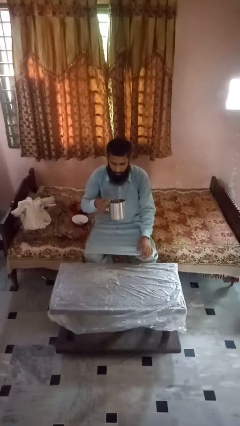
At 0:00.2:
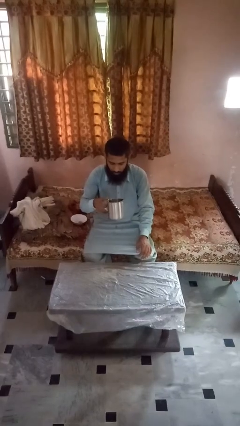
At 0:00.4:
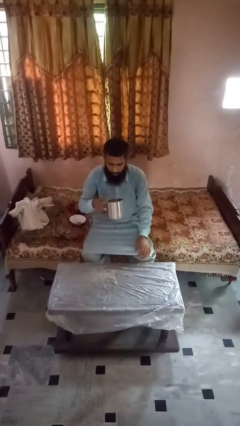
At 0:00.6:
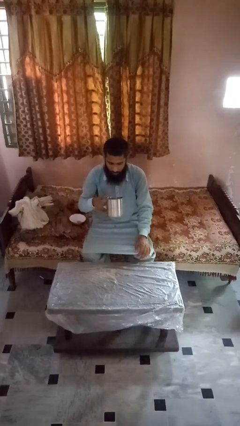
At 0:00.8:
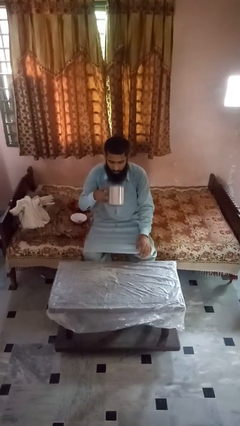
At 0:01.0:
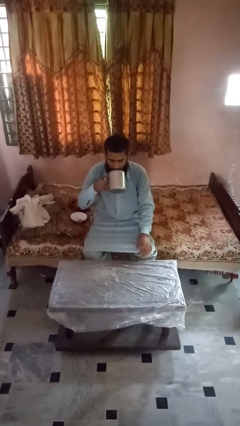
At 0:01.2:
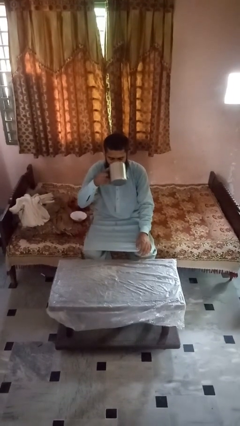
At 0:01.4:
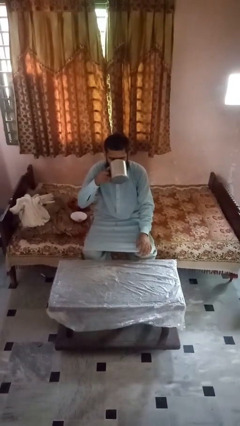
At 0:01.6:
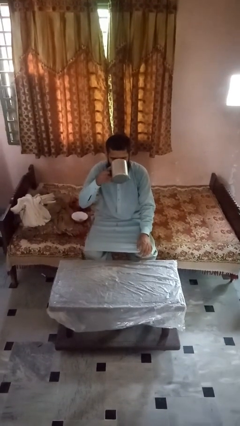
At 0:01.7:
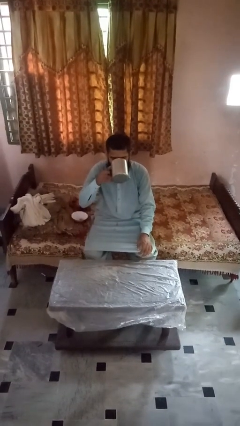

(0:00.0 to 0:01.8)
person drinks from mug

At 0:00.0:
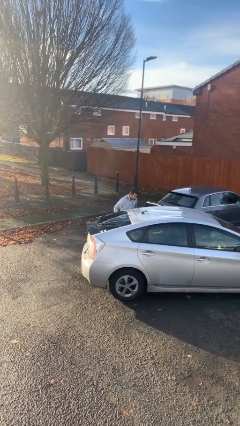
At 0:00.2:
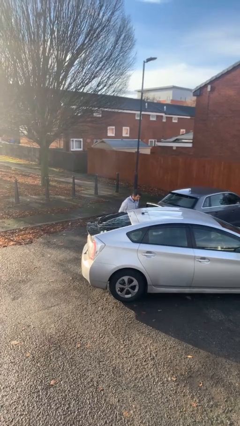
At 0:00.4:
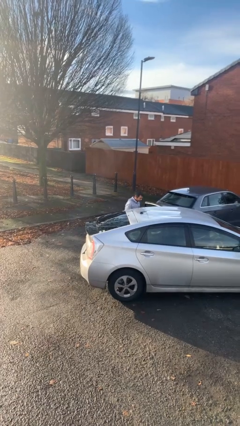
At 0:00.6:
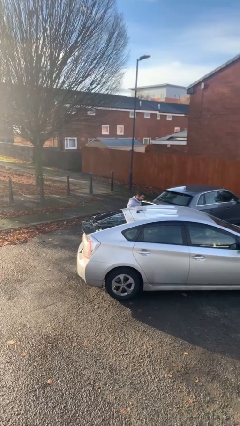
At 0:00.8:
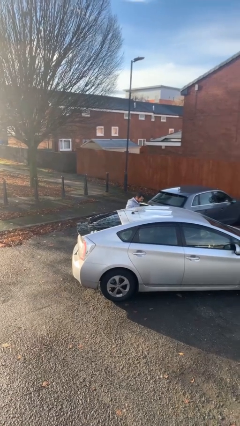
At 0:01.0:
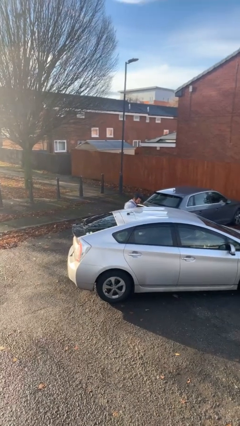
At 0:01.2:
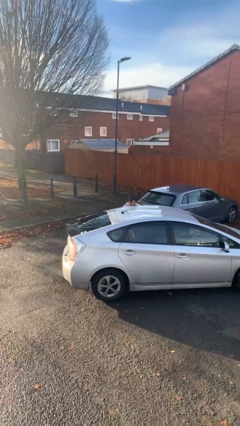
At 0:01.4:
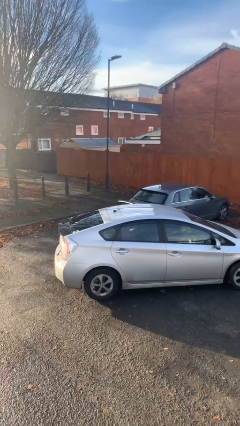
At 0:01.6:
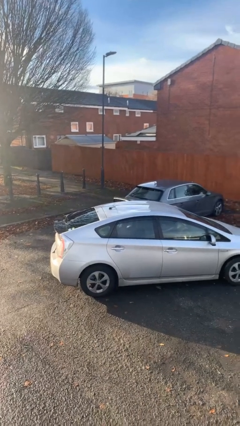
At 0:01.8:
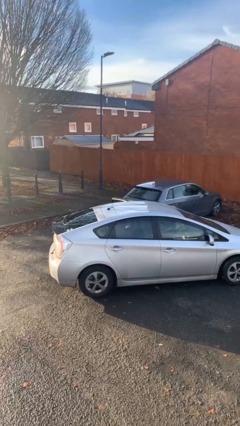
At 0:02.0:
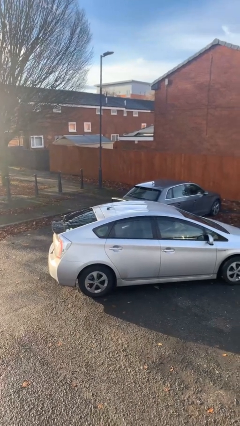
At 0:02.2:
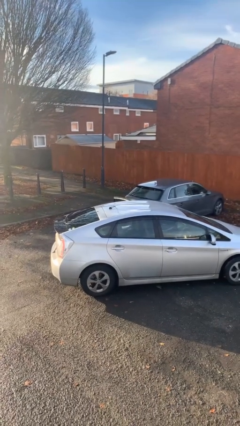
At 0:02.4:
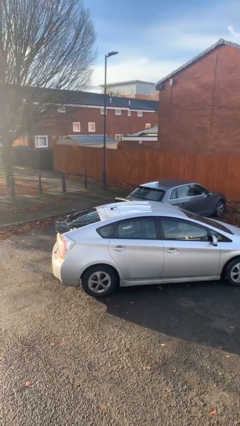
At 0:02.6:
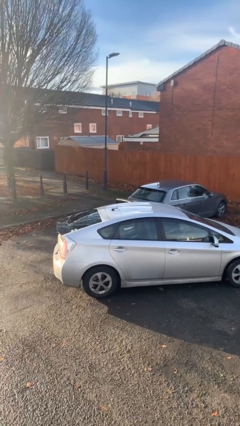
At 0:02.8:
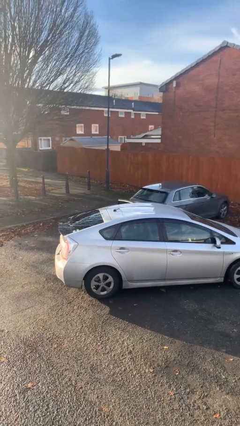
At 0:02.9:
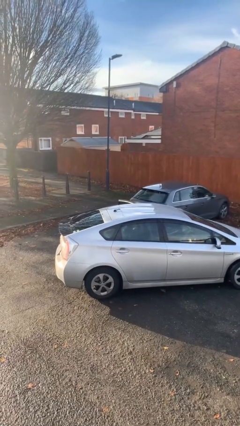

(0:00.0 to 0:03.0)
person enters car

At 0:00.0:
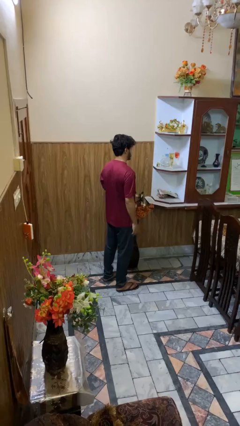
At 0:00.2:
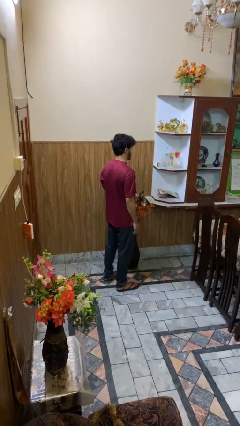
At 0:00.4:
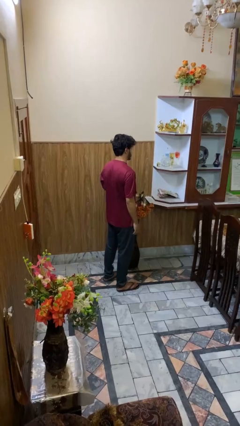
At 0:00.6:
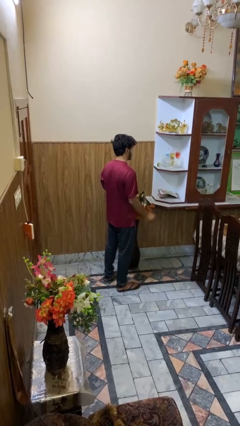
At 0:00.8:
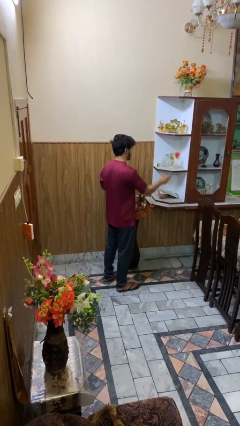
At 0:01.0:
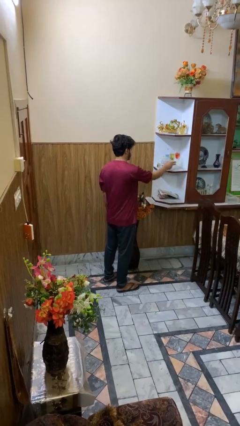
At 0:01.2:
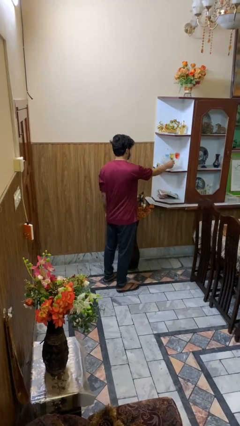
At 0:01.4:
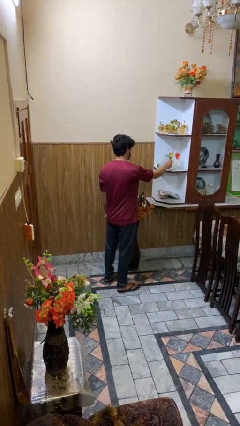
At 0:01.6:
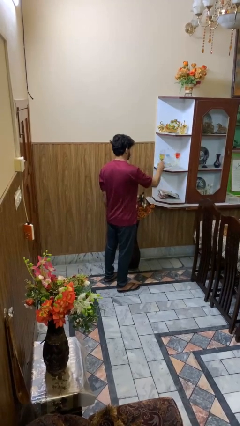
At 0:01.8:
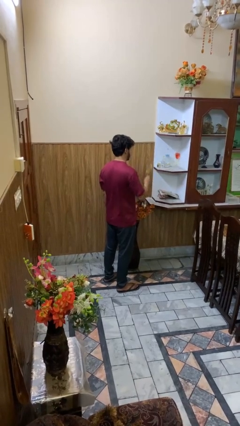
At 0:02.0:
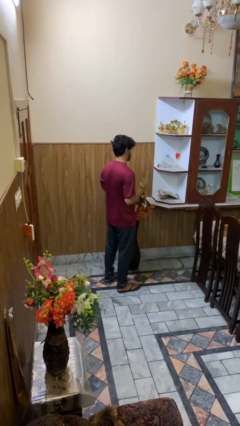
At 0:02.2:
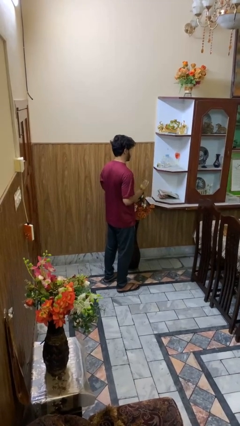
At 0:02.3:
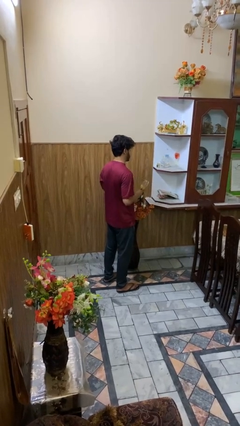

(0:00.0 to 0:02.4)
person picks up object from cabinet

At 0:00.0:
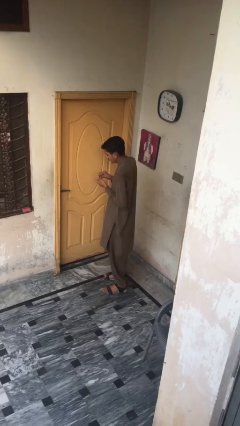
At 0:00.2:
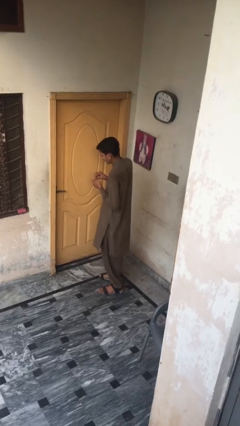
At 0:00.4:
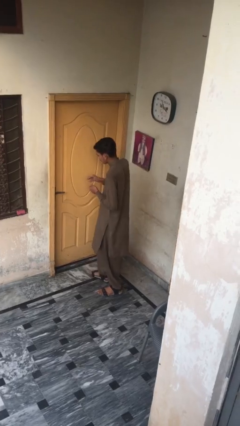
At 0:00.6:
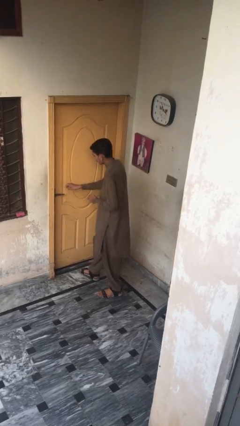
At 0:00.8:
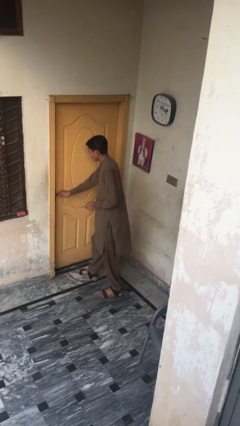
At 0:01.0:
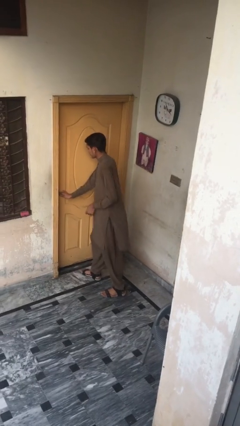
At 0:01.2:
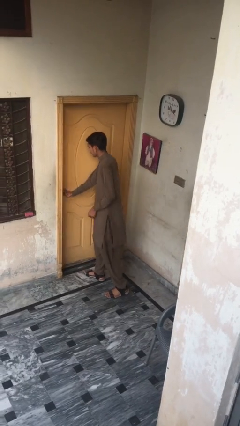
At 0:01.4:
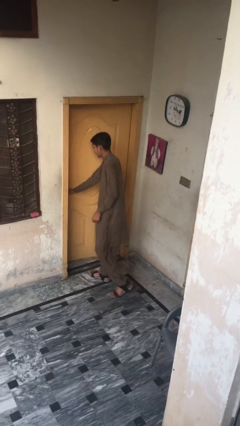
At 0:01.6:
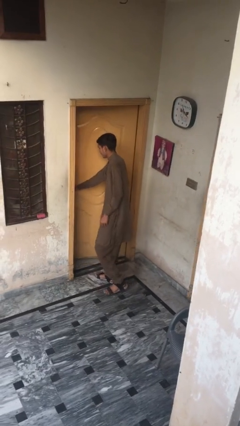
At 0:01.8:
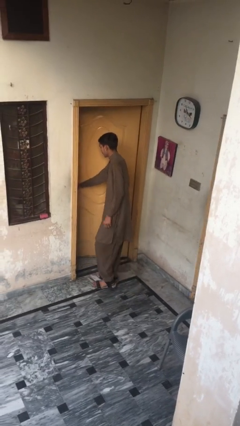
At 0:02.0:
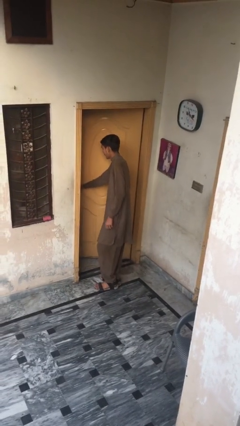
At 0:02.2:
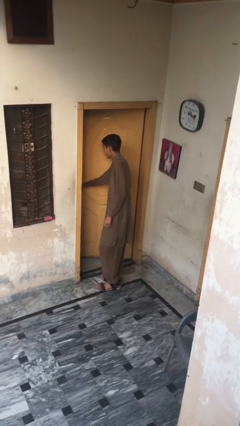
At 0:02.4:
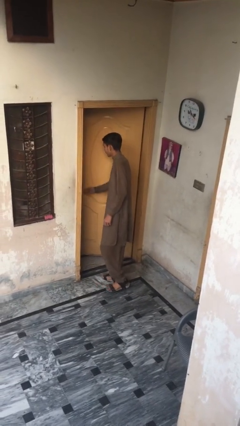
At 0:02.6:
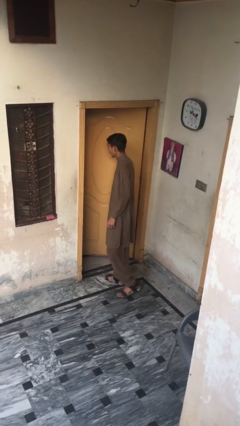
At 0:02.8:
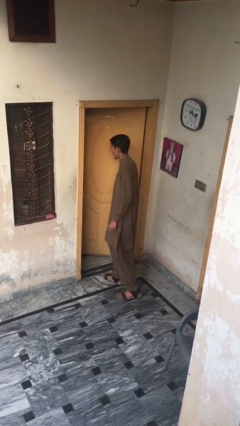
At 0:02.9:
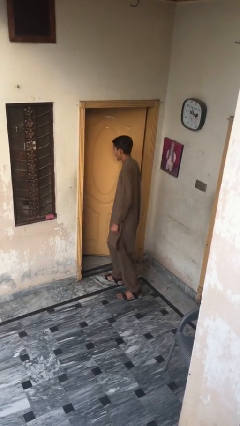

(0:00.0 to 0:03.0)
person opens facility door

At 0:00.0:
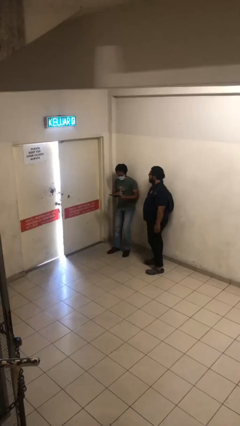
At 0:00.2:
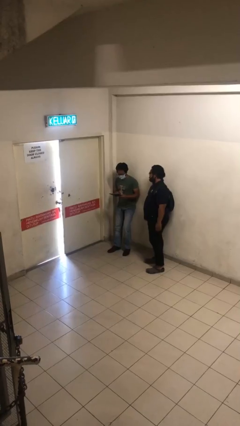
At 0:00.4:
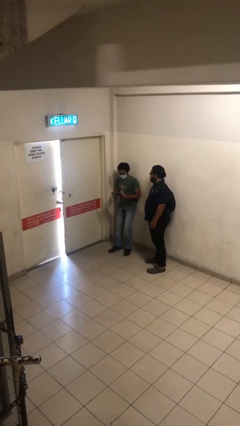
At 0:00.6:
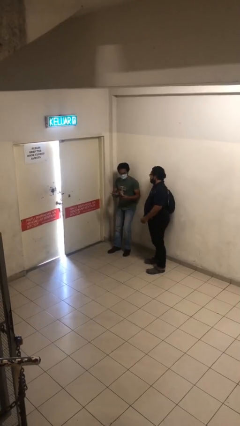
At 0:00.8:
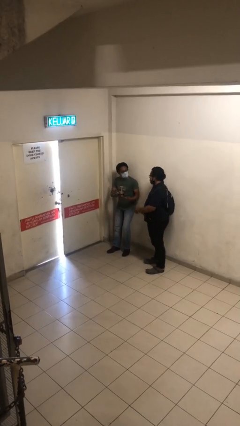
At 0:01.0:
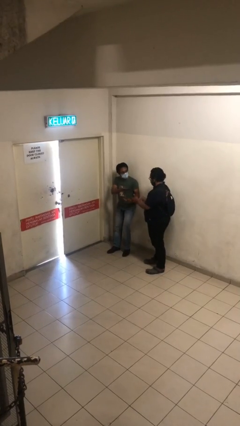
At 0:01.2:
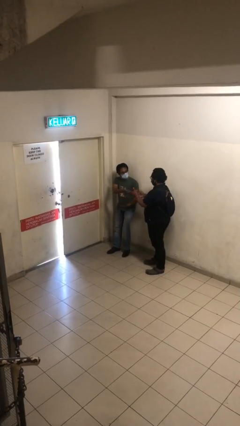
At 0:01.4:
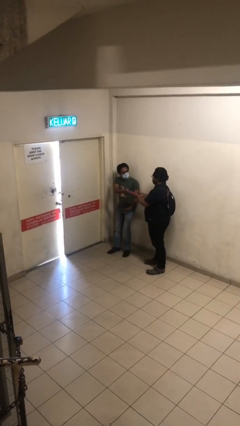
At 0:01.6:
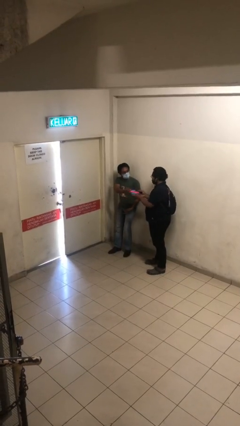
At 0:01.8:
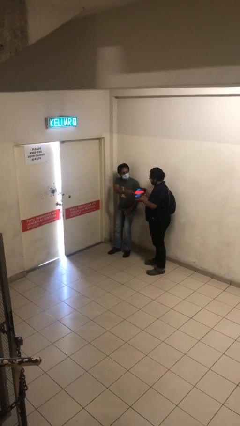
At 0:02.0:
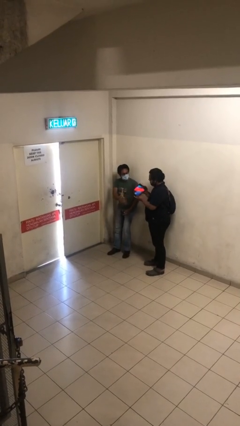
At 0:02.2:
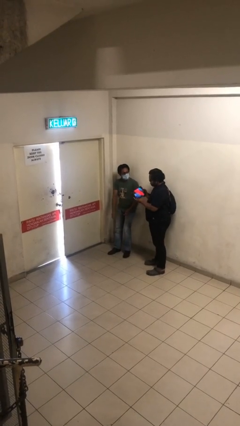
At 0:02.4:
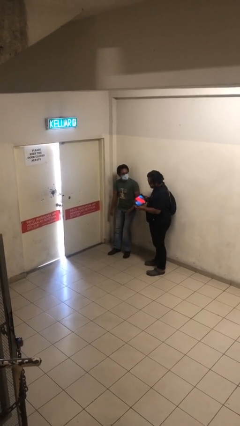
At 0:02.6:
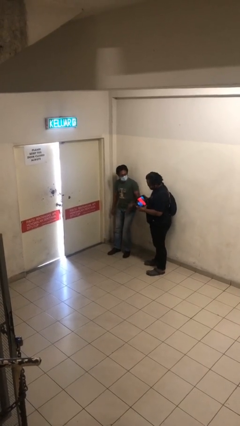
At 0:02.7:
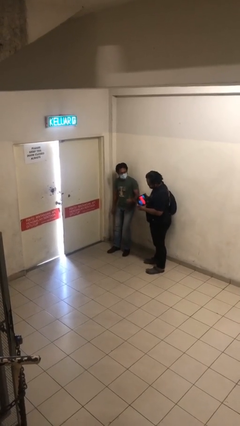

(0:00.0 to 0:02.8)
person transfers object to person

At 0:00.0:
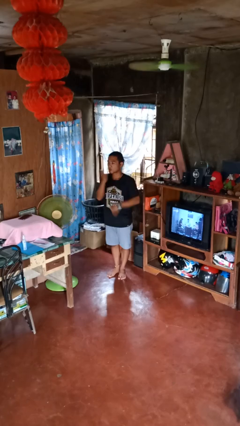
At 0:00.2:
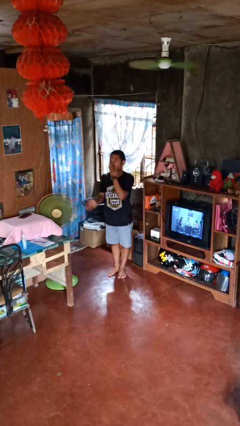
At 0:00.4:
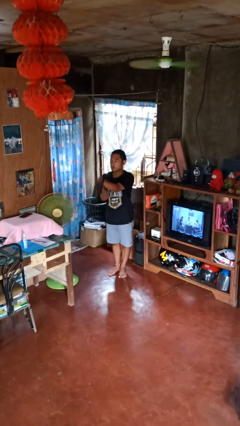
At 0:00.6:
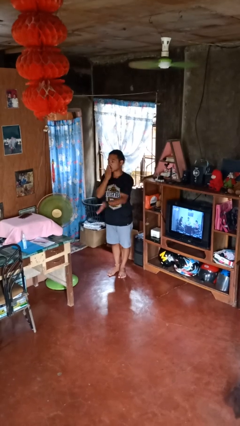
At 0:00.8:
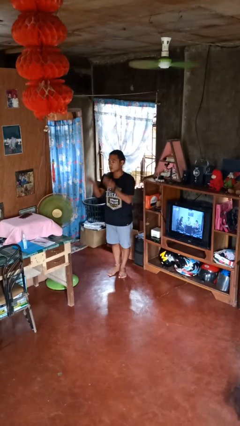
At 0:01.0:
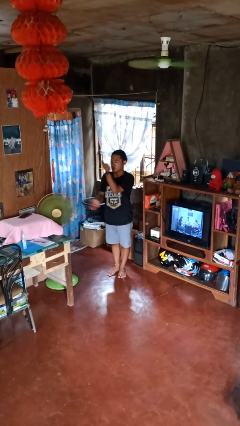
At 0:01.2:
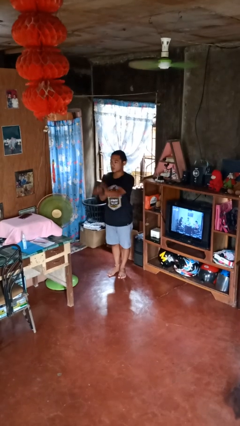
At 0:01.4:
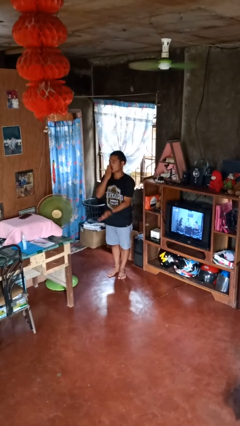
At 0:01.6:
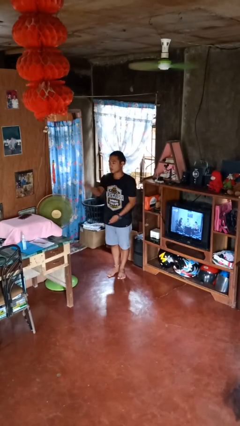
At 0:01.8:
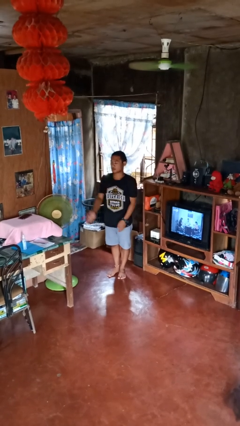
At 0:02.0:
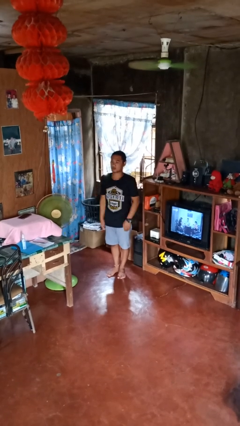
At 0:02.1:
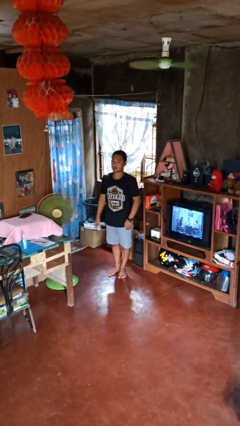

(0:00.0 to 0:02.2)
person gestures blow kiss

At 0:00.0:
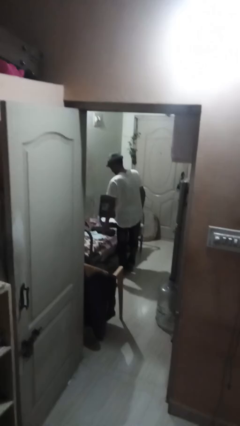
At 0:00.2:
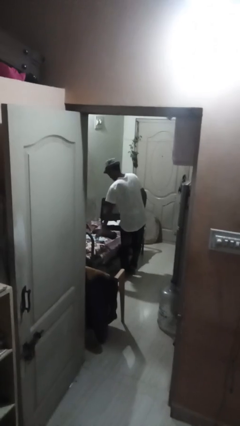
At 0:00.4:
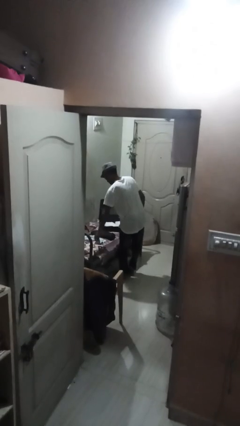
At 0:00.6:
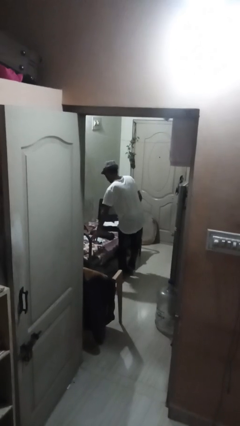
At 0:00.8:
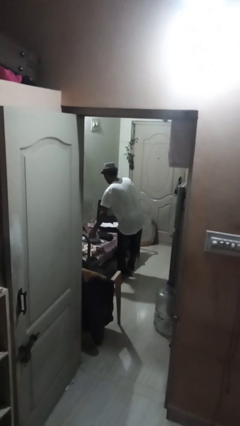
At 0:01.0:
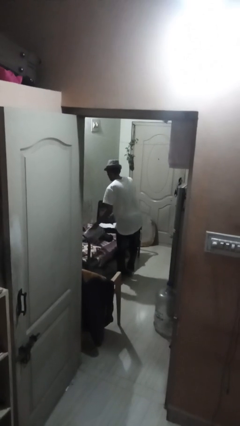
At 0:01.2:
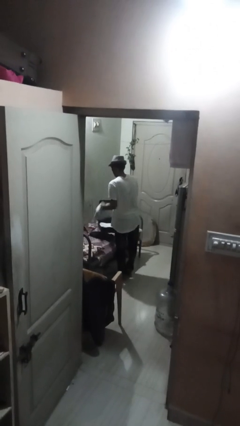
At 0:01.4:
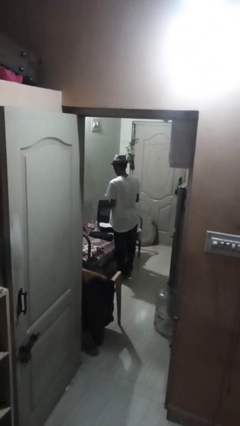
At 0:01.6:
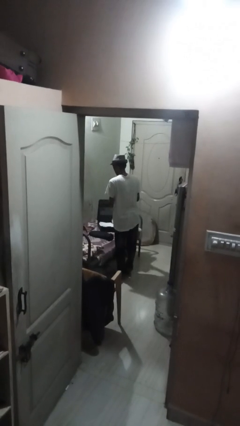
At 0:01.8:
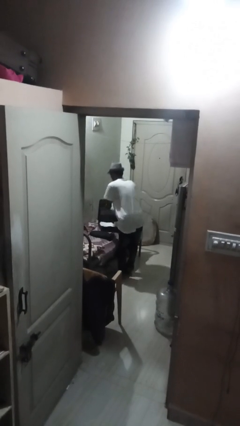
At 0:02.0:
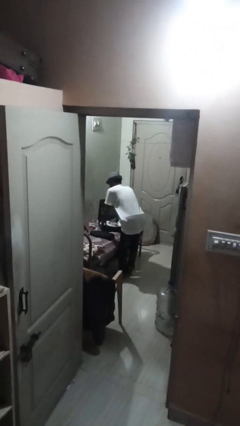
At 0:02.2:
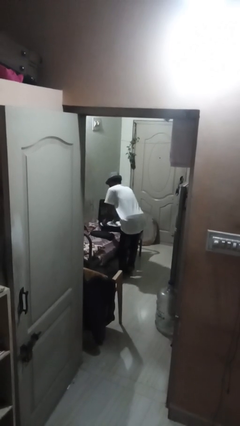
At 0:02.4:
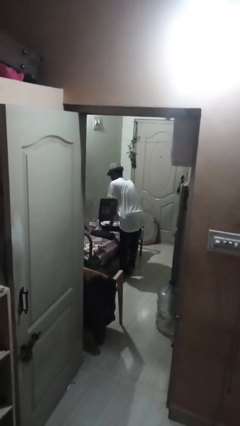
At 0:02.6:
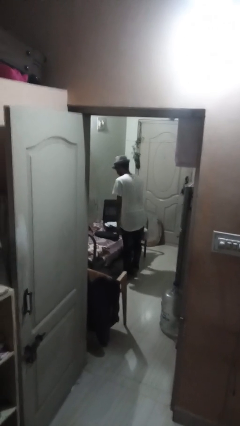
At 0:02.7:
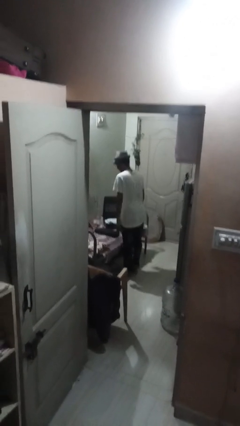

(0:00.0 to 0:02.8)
person loads clothes into suitcase
